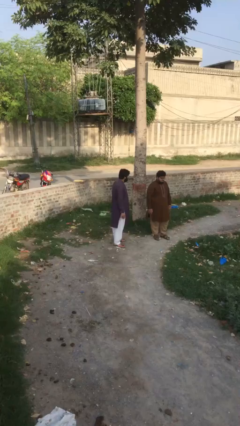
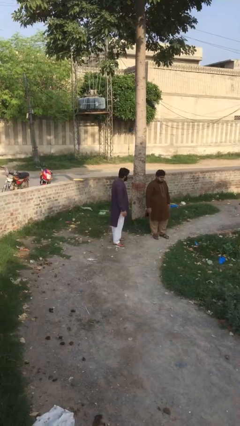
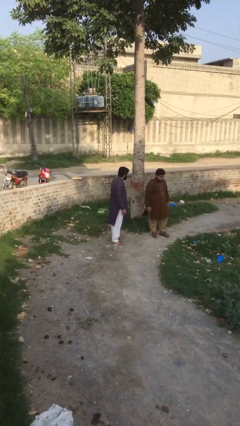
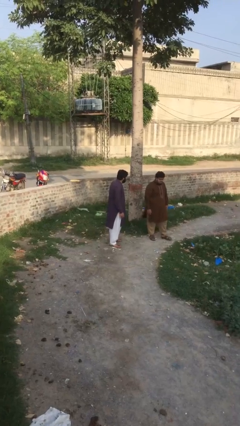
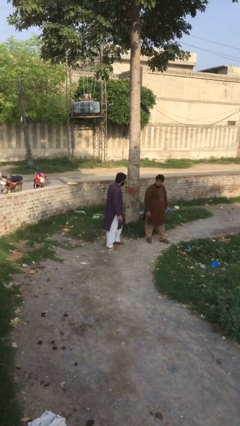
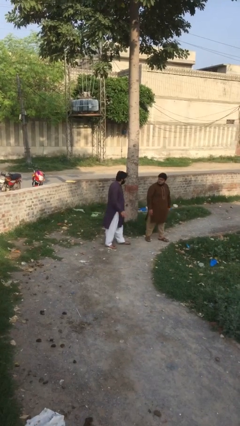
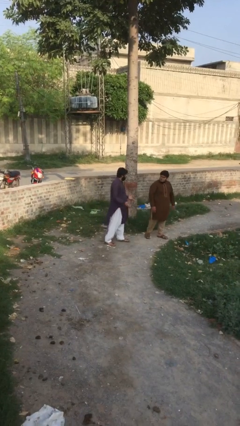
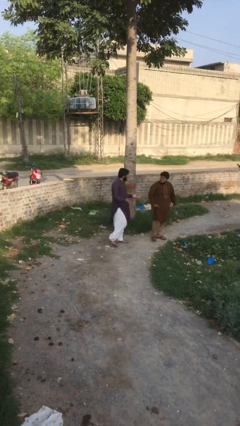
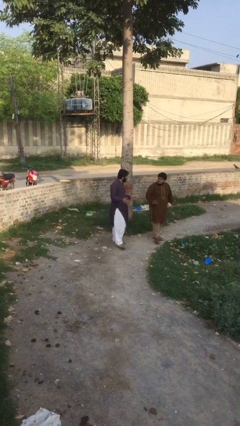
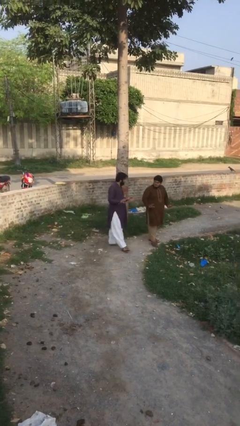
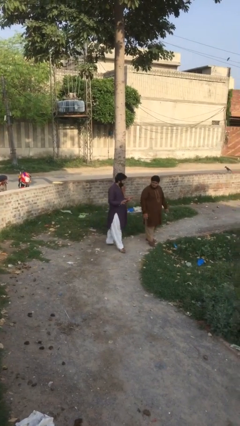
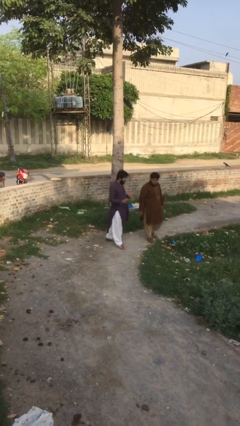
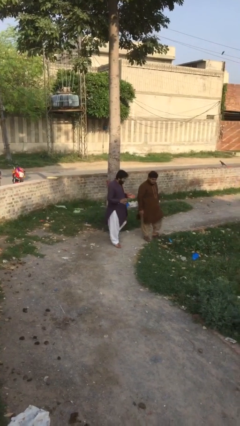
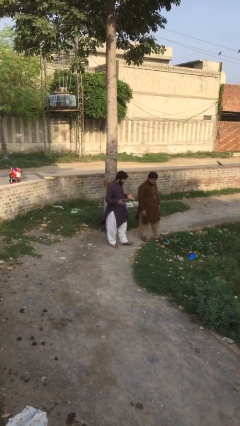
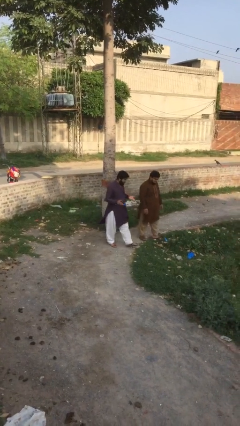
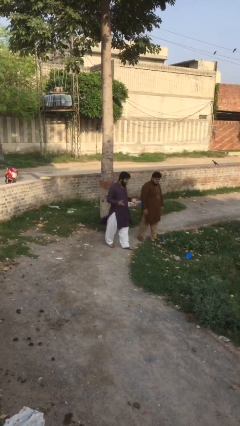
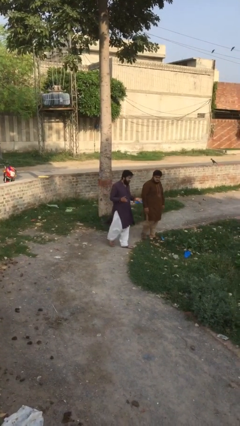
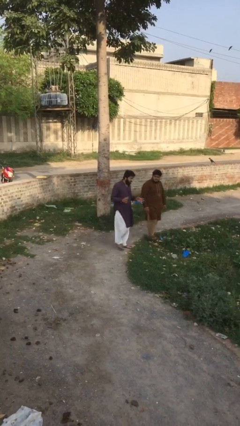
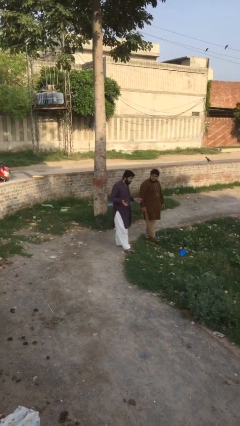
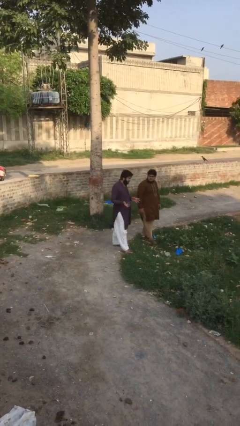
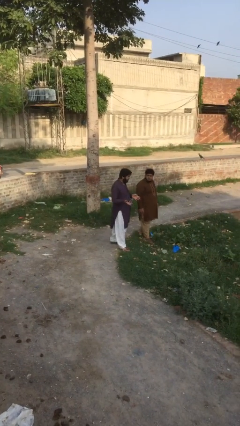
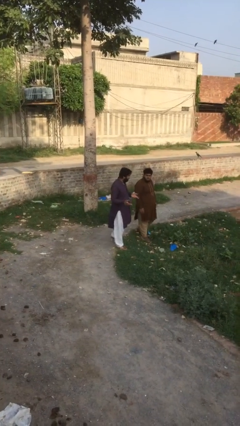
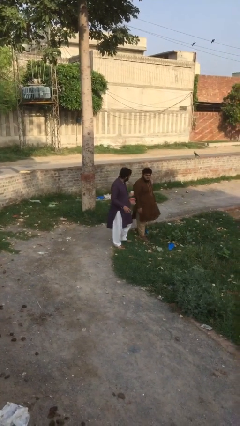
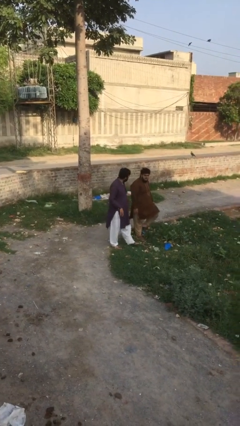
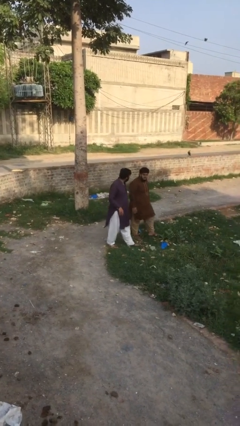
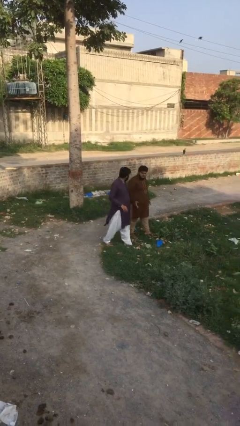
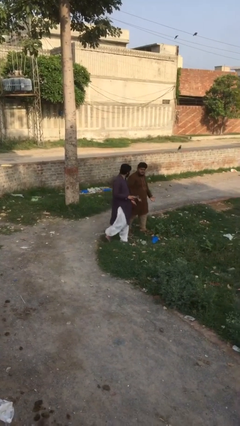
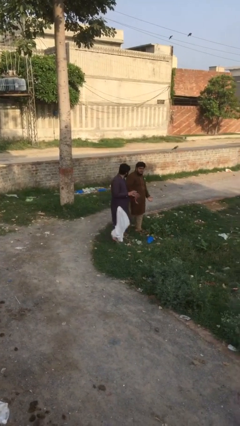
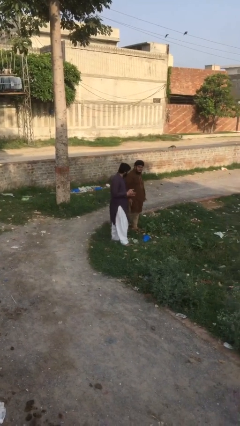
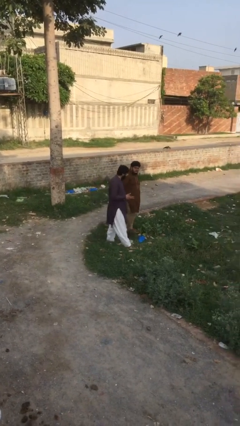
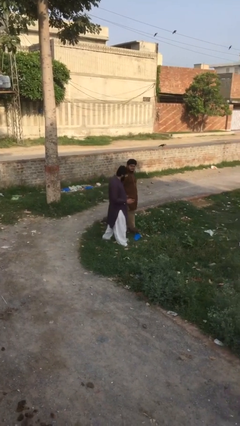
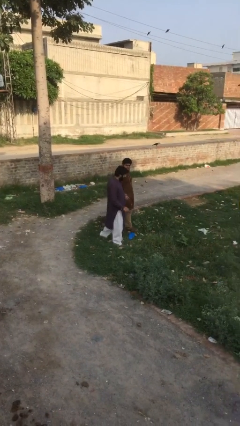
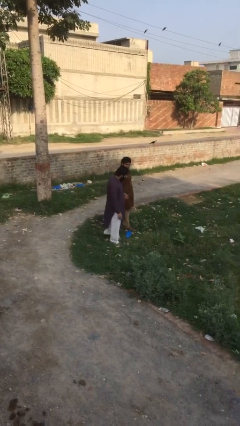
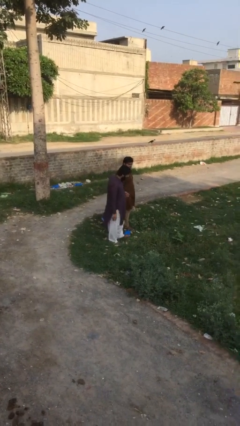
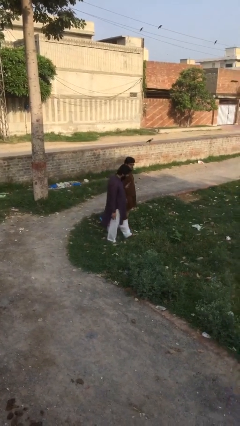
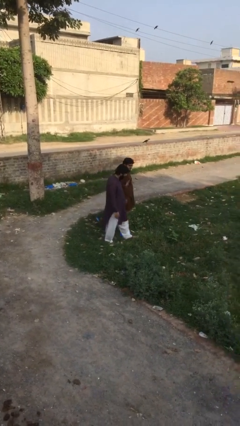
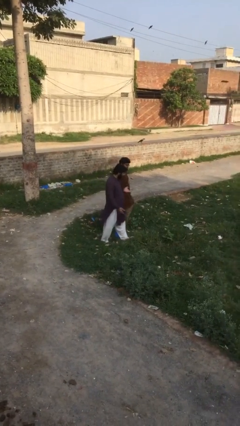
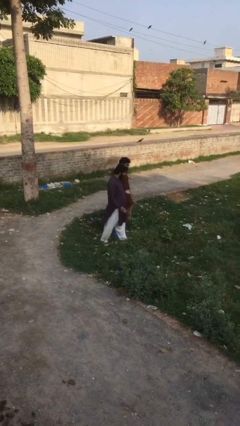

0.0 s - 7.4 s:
person talks to person

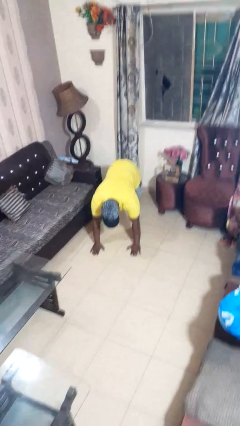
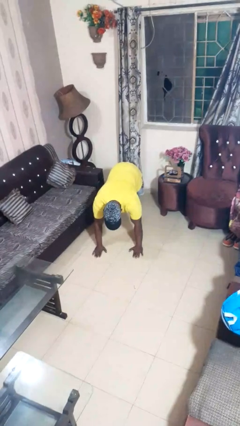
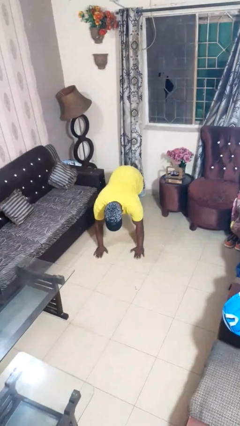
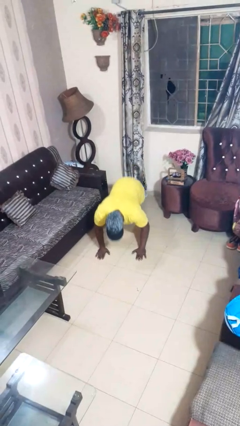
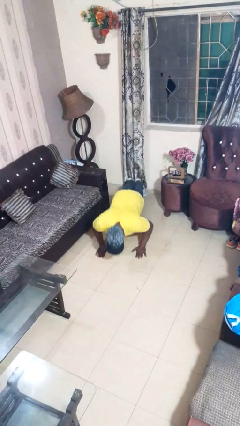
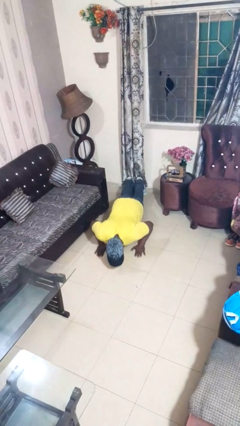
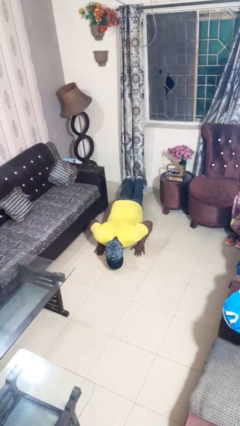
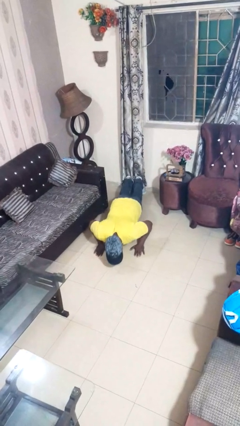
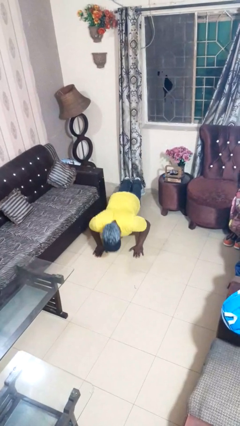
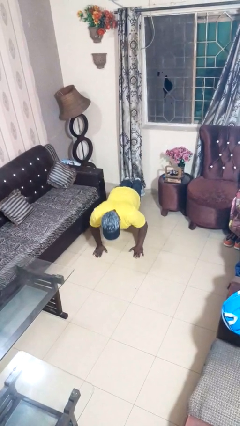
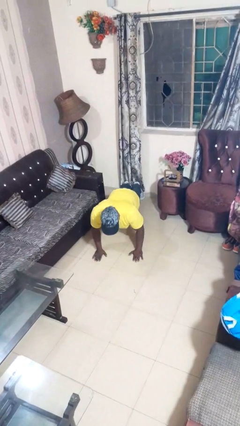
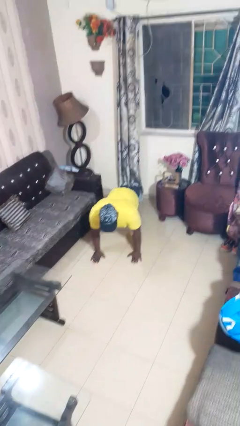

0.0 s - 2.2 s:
person exercises with pushup

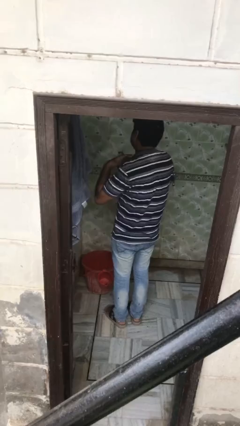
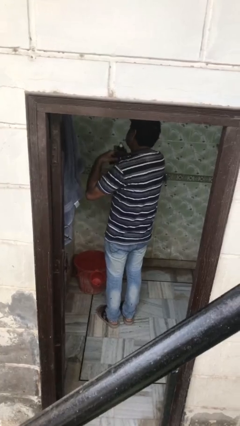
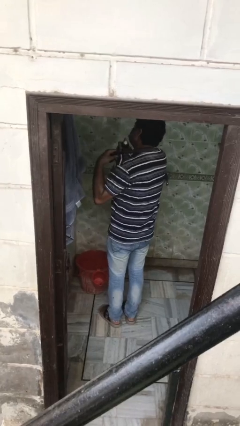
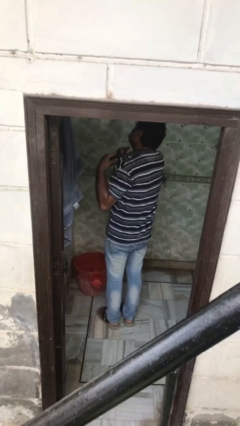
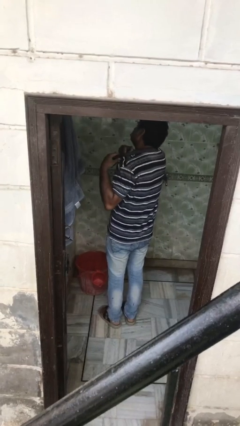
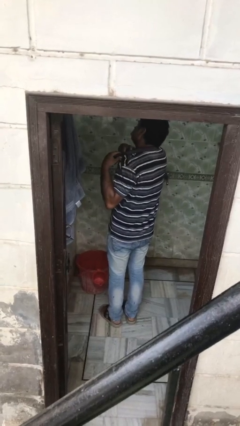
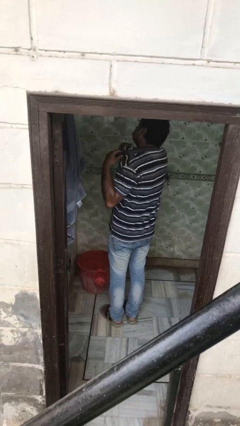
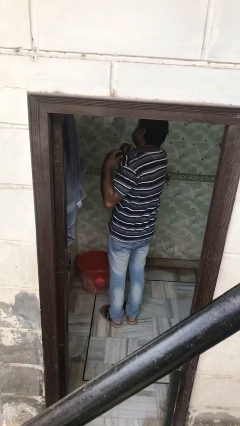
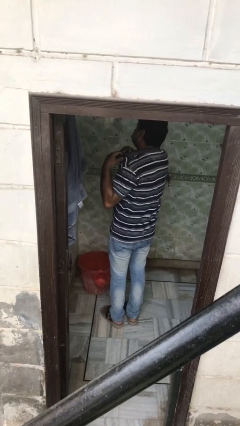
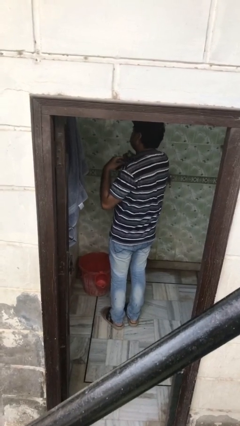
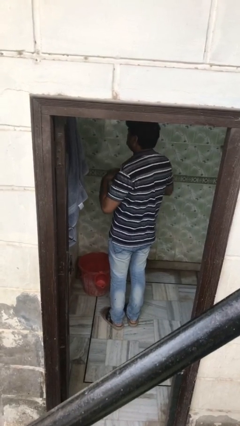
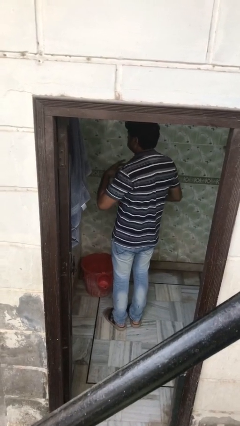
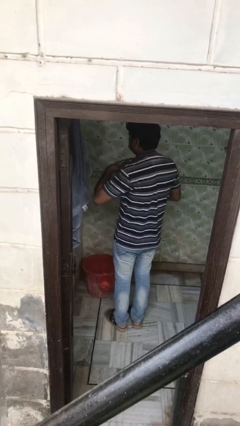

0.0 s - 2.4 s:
person applies deodorant

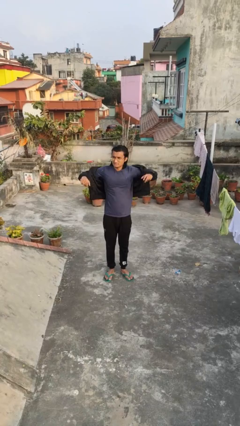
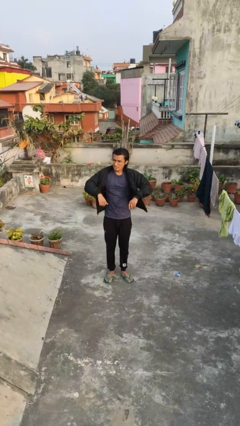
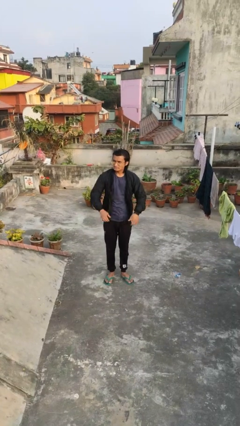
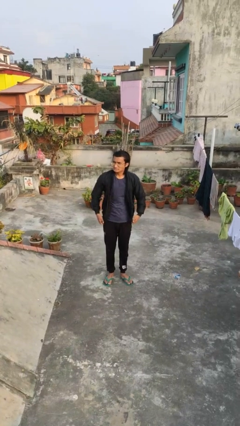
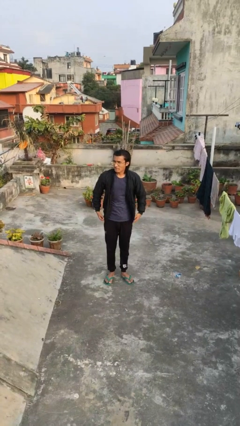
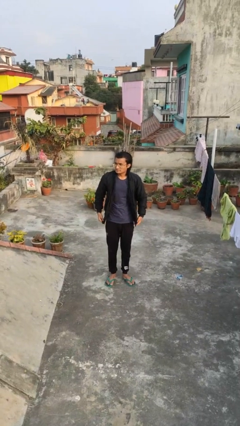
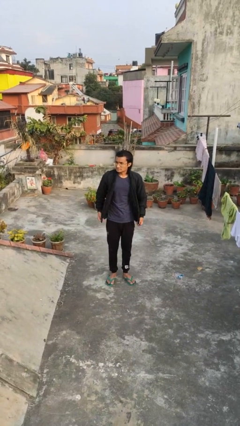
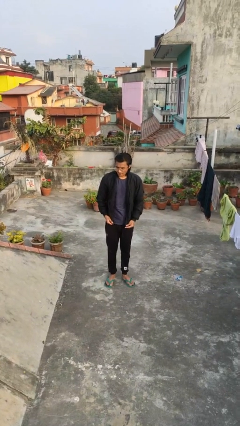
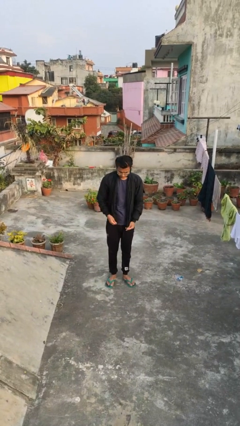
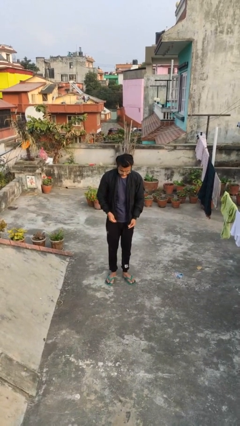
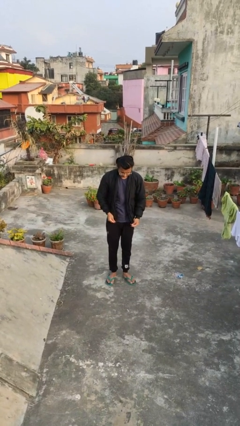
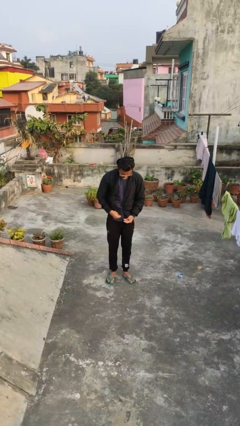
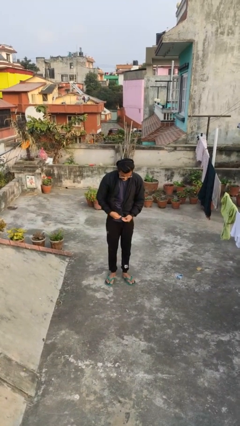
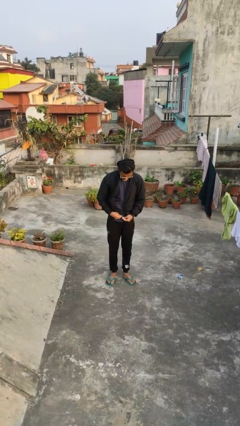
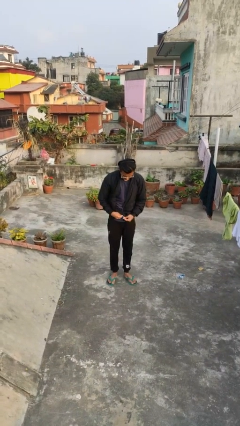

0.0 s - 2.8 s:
person puts on jacket

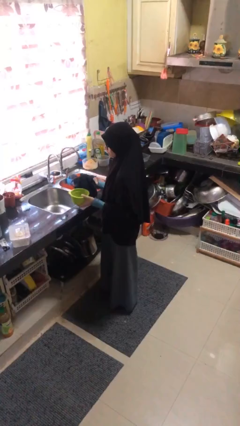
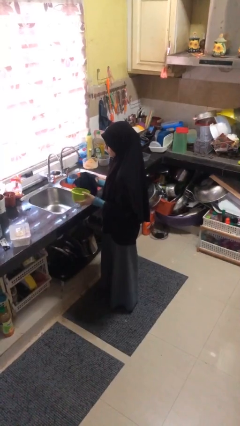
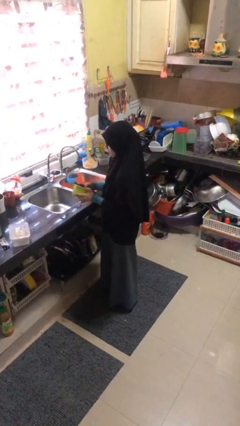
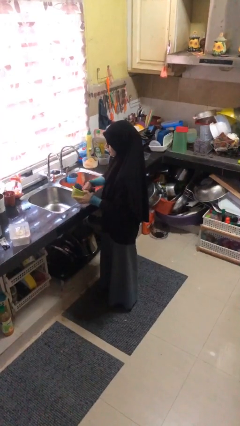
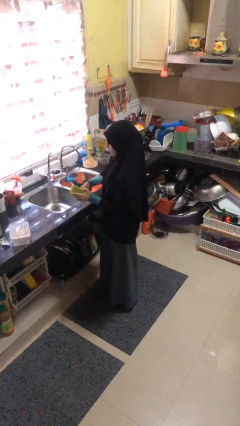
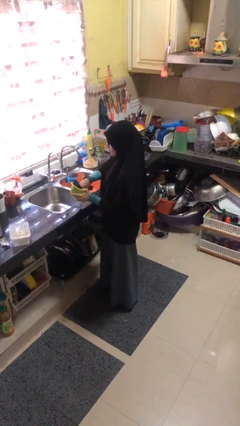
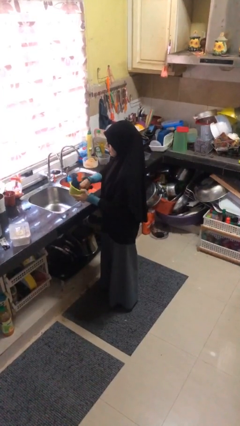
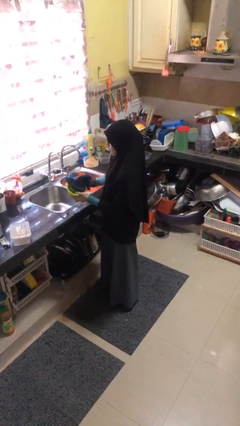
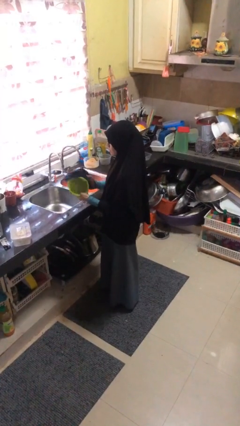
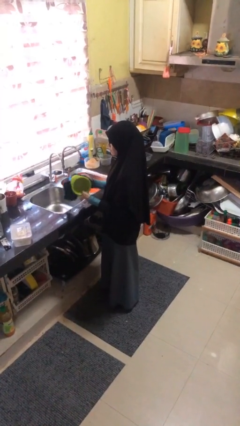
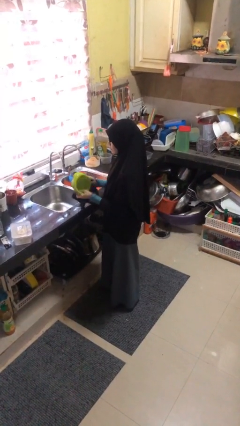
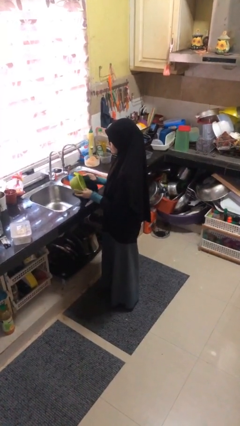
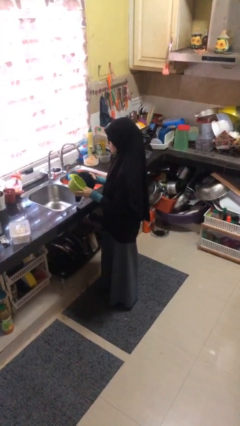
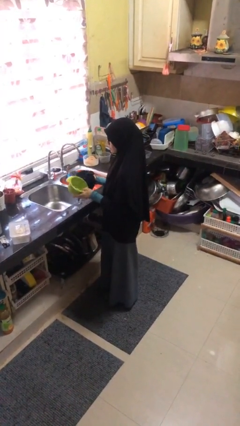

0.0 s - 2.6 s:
person dries dish
